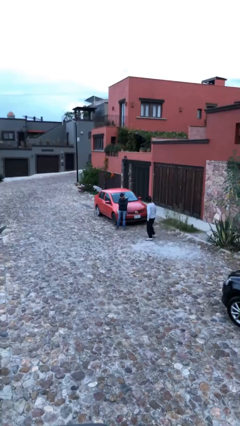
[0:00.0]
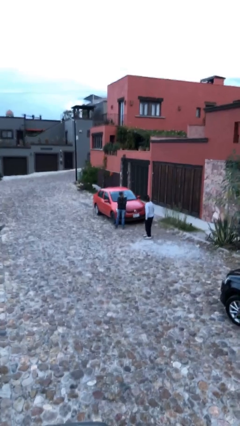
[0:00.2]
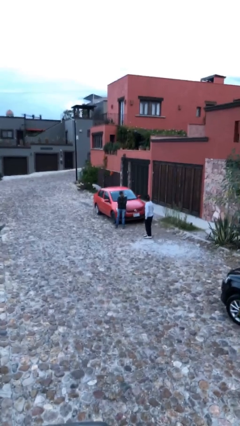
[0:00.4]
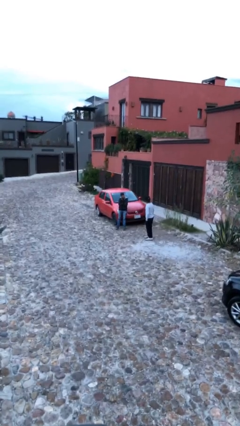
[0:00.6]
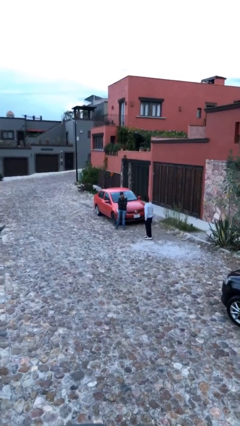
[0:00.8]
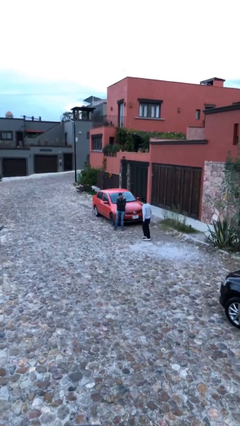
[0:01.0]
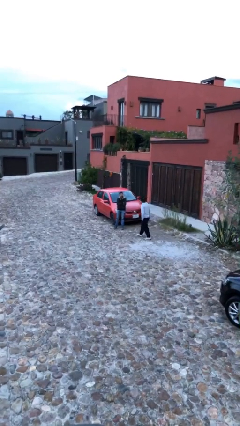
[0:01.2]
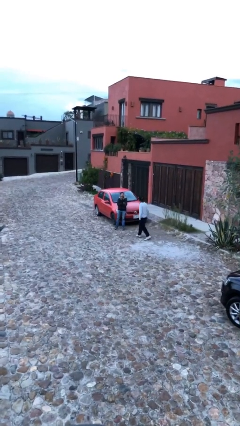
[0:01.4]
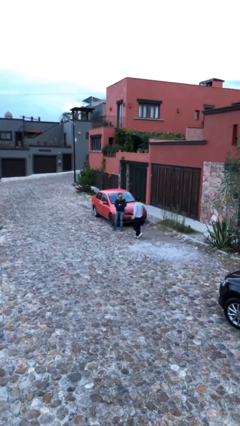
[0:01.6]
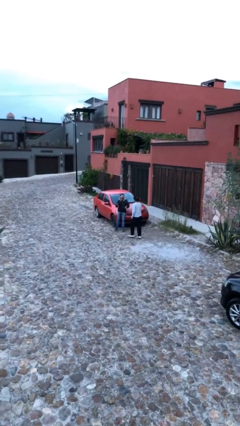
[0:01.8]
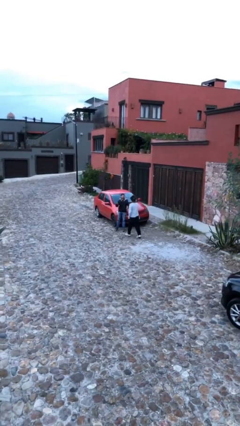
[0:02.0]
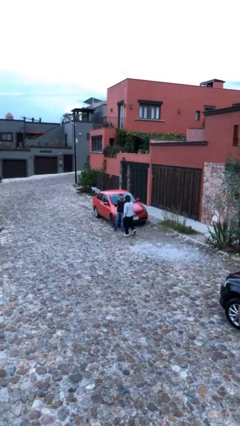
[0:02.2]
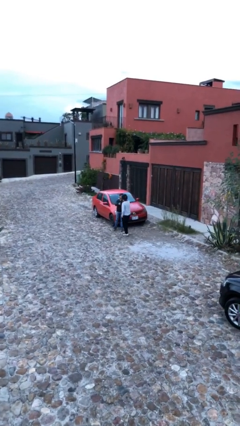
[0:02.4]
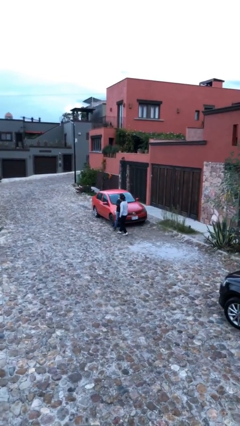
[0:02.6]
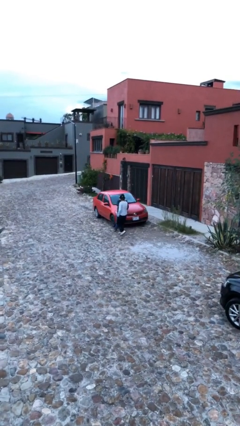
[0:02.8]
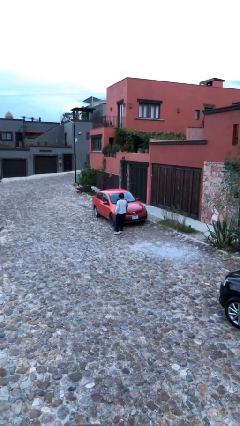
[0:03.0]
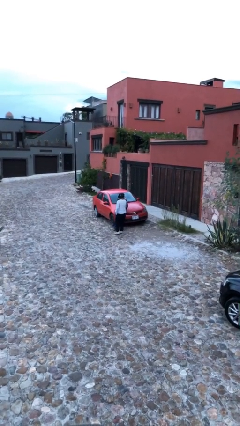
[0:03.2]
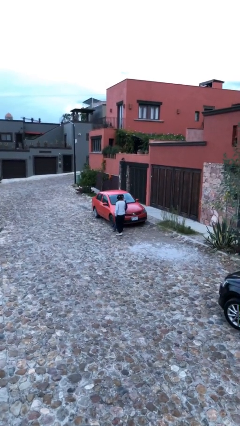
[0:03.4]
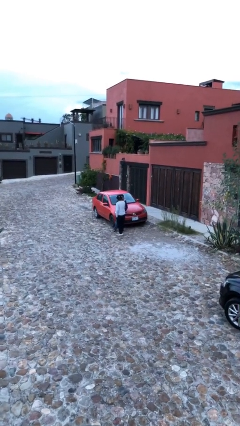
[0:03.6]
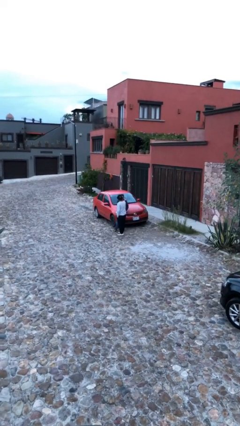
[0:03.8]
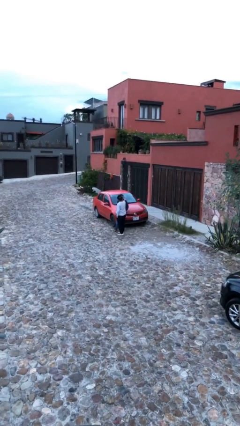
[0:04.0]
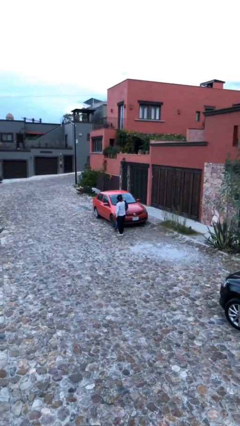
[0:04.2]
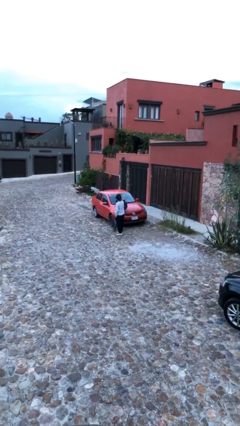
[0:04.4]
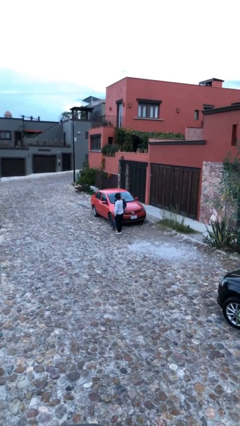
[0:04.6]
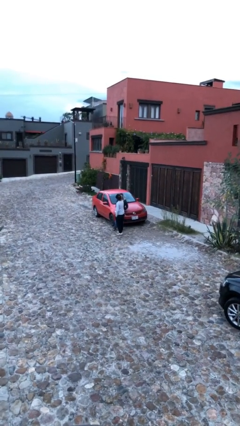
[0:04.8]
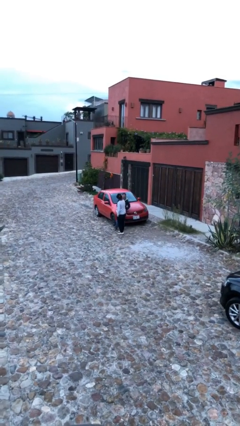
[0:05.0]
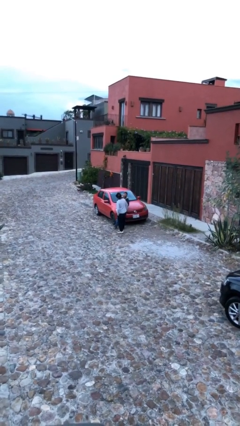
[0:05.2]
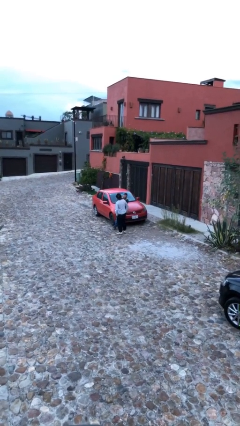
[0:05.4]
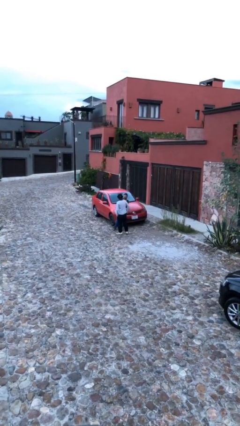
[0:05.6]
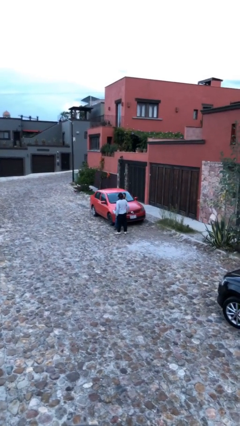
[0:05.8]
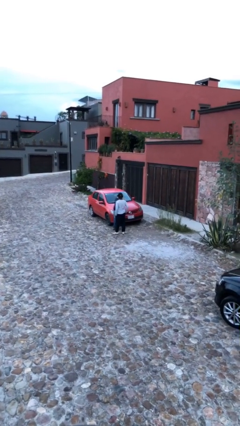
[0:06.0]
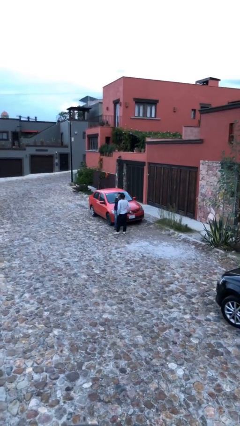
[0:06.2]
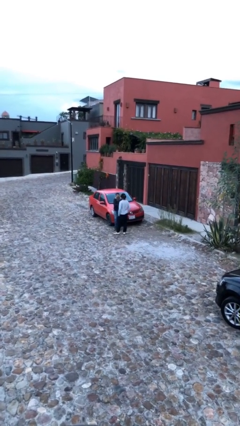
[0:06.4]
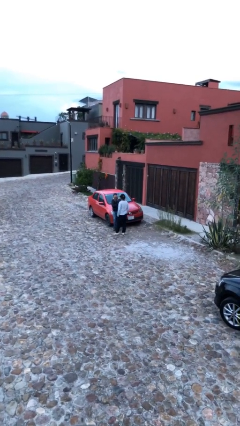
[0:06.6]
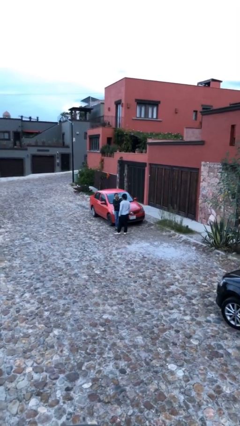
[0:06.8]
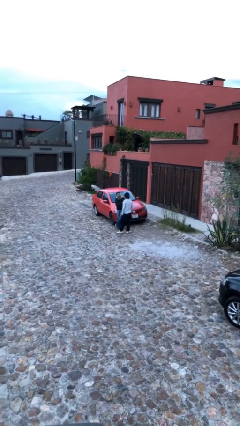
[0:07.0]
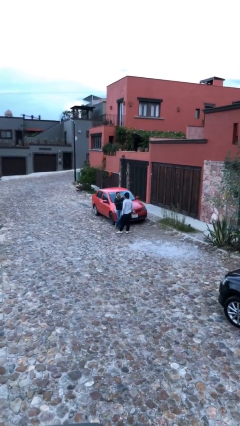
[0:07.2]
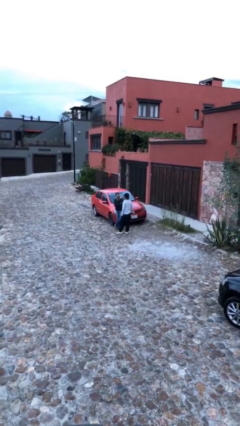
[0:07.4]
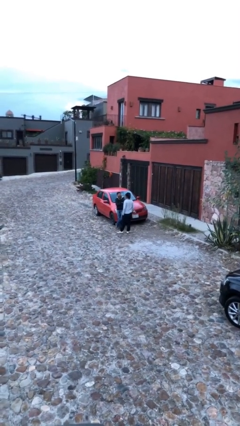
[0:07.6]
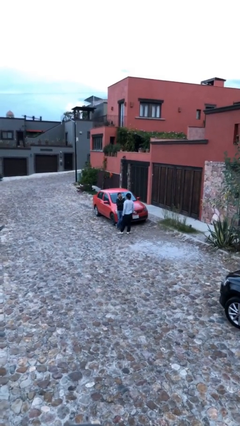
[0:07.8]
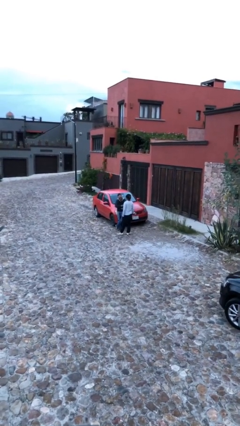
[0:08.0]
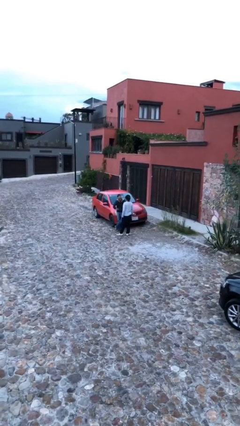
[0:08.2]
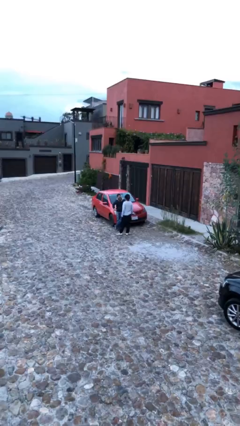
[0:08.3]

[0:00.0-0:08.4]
person shakes hand

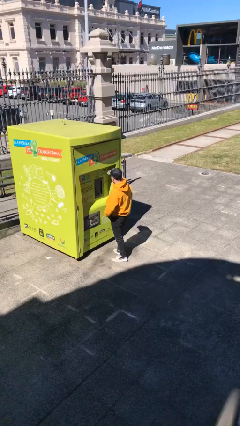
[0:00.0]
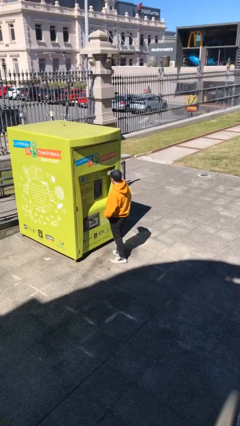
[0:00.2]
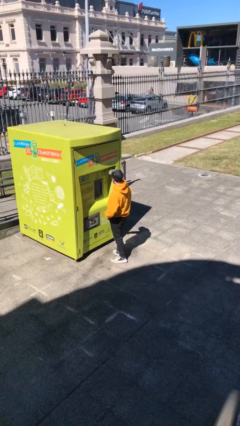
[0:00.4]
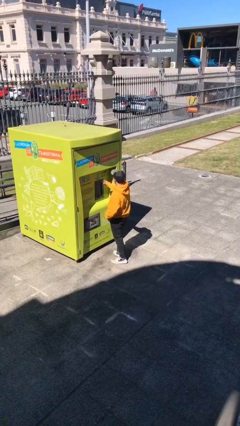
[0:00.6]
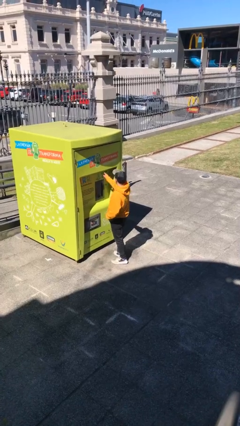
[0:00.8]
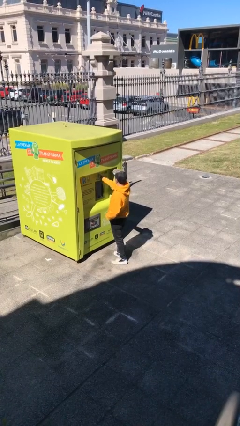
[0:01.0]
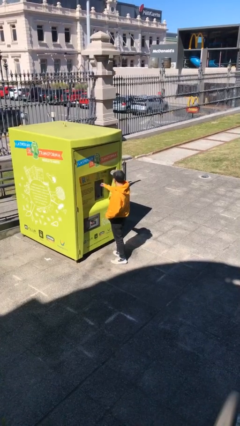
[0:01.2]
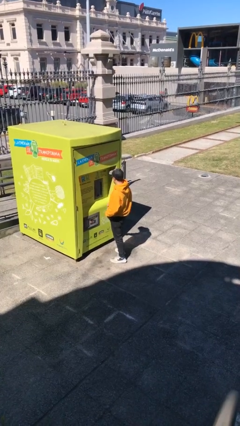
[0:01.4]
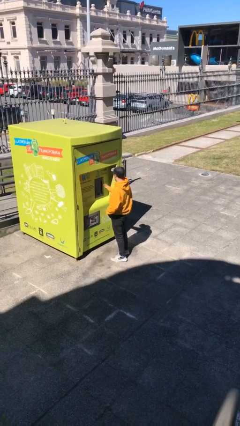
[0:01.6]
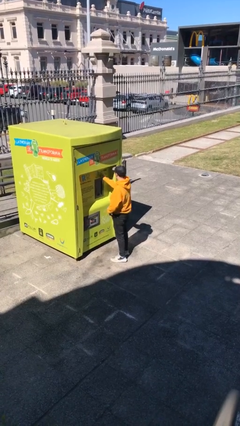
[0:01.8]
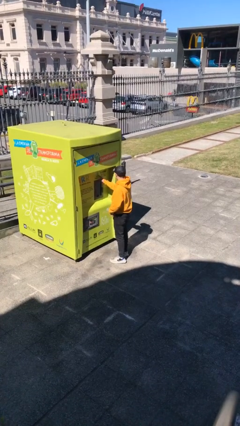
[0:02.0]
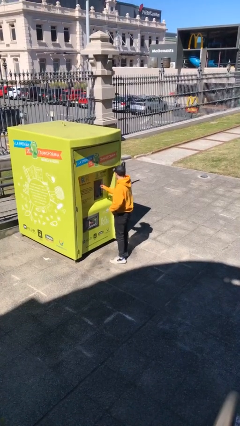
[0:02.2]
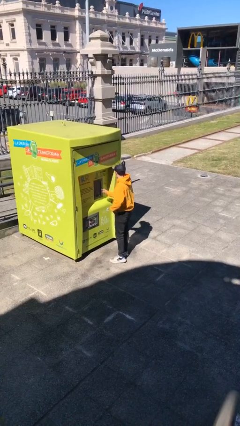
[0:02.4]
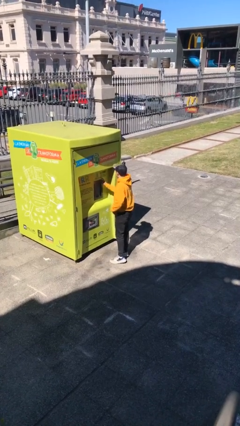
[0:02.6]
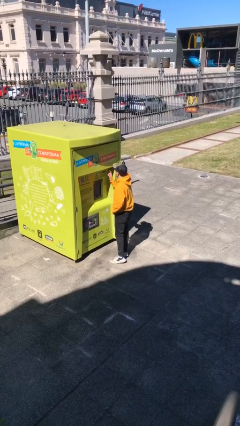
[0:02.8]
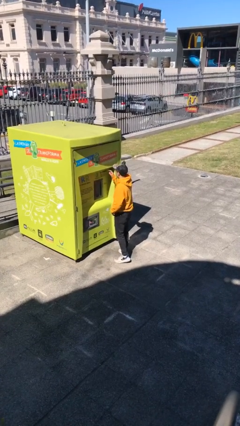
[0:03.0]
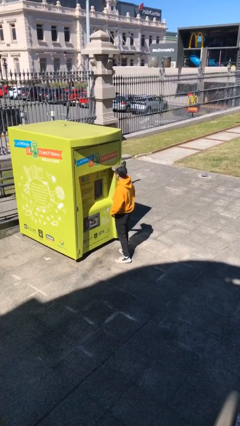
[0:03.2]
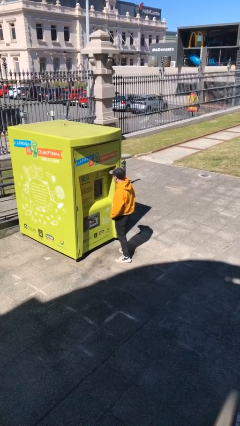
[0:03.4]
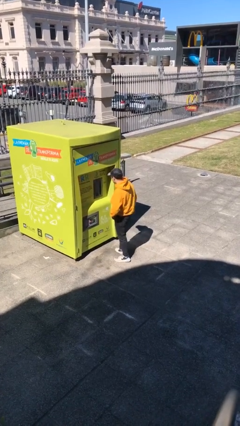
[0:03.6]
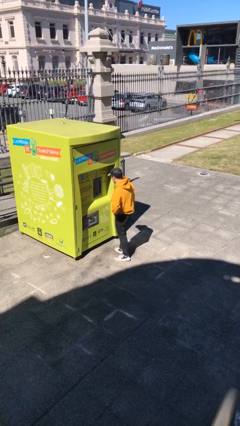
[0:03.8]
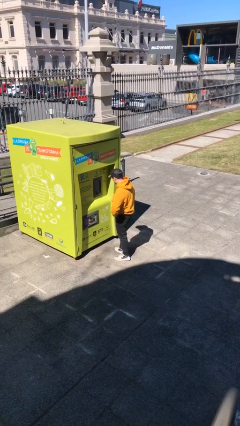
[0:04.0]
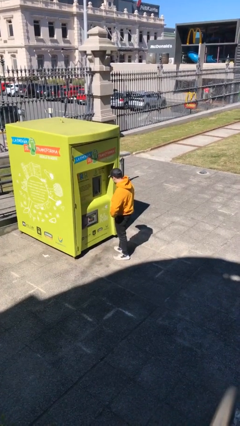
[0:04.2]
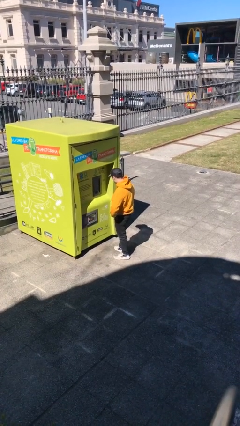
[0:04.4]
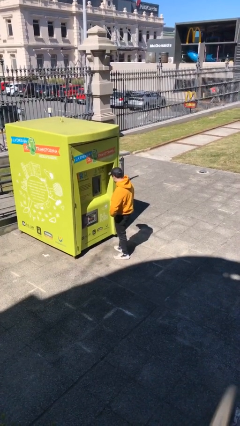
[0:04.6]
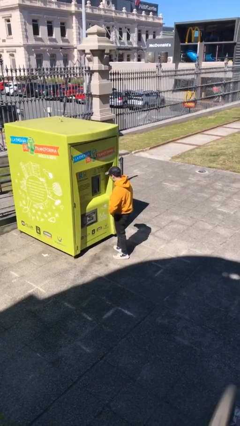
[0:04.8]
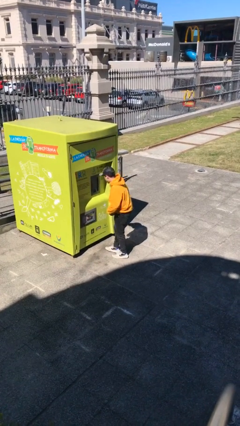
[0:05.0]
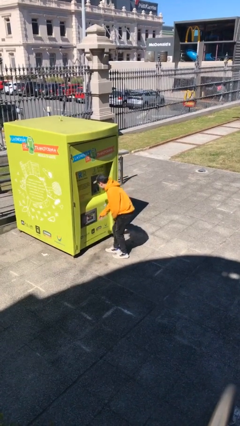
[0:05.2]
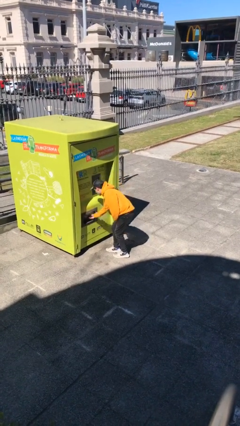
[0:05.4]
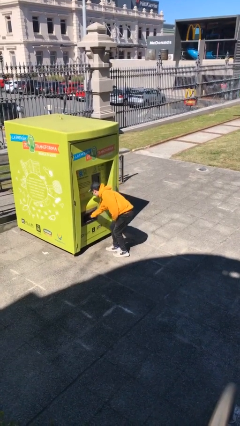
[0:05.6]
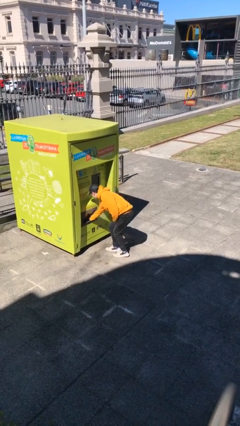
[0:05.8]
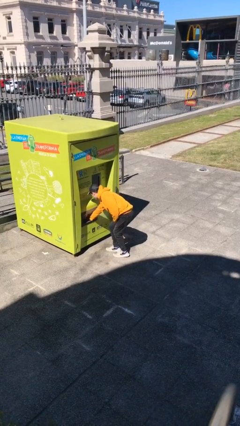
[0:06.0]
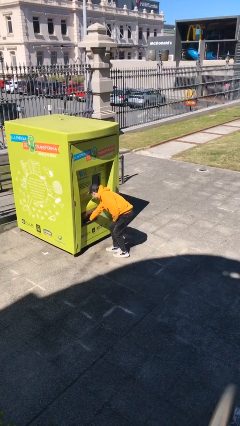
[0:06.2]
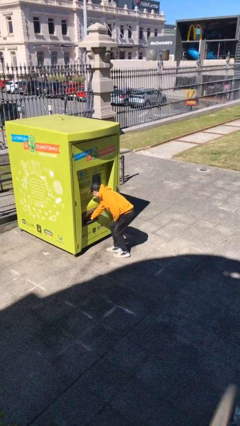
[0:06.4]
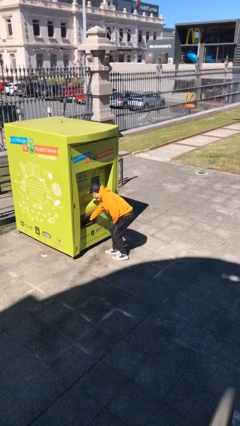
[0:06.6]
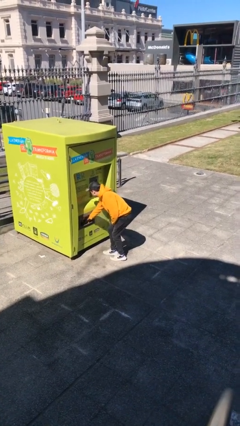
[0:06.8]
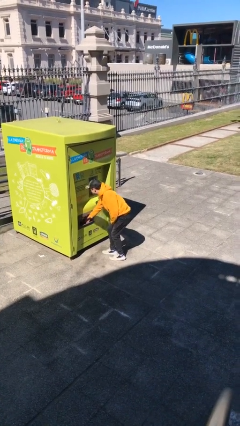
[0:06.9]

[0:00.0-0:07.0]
person purchases from machine

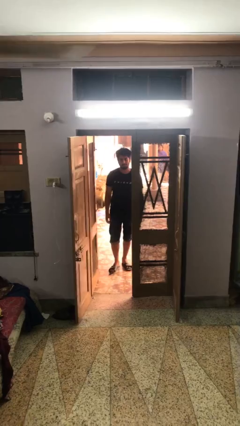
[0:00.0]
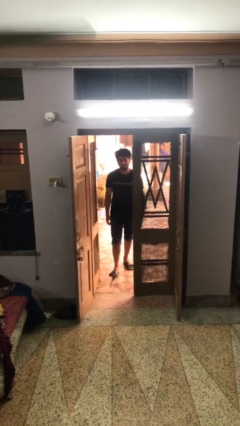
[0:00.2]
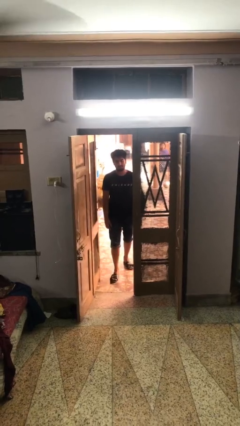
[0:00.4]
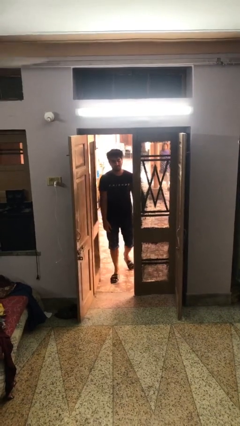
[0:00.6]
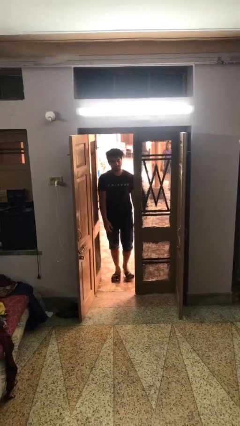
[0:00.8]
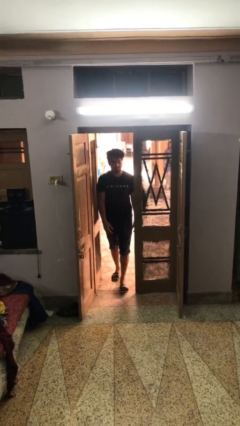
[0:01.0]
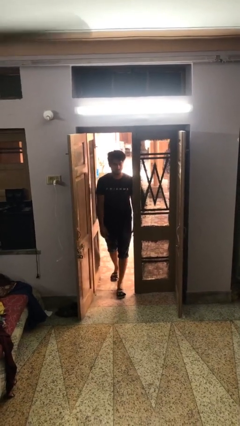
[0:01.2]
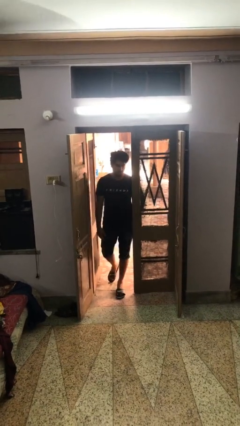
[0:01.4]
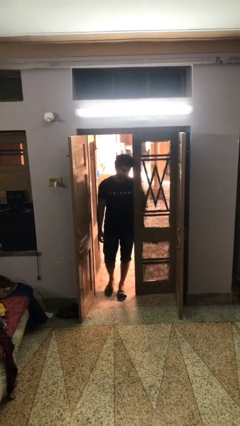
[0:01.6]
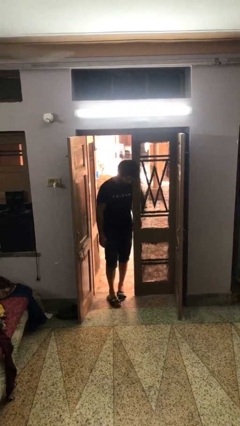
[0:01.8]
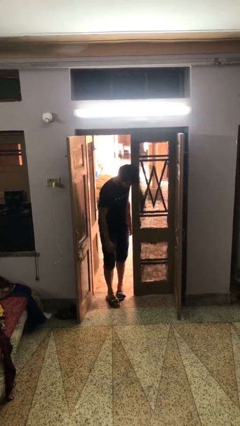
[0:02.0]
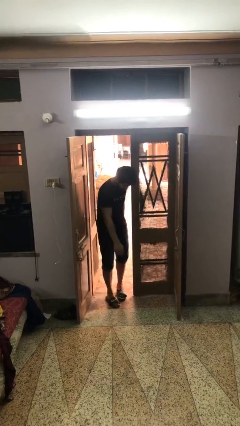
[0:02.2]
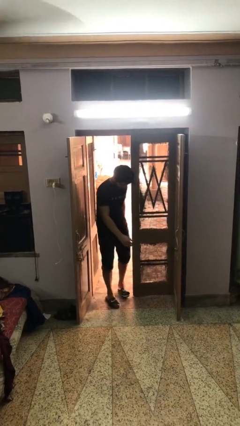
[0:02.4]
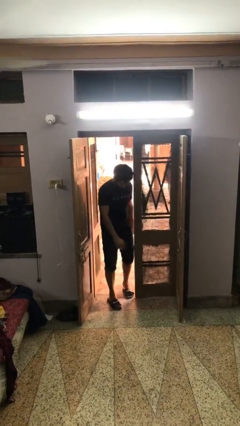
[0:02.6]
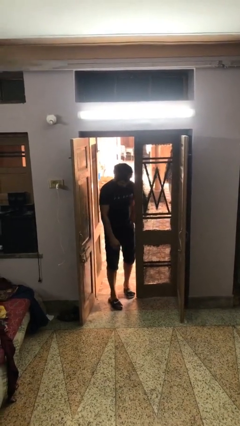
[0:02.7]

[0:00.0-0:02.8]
person bumps into wall
